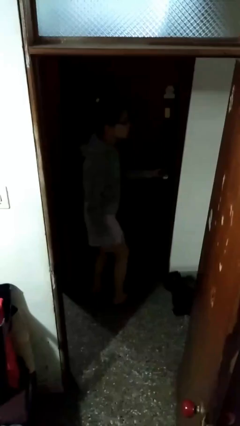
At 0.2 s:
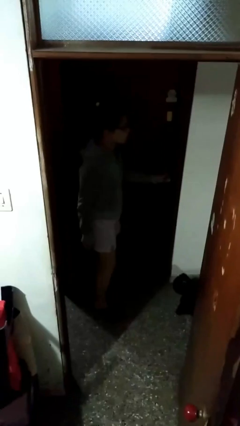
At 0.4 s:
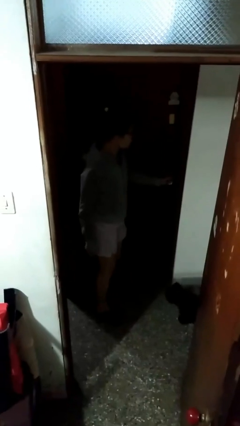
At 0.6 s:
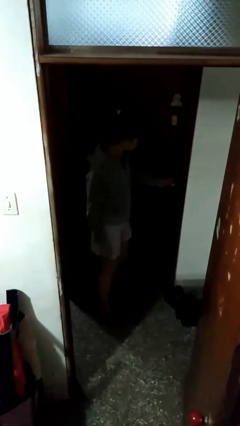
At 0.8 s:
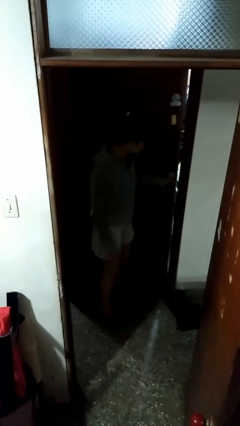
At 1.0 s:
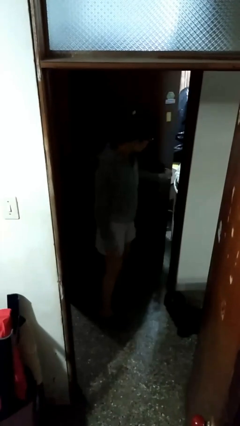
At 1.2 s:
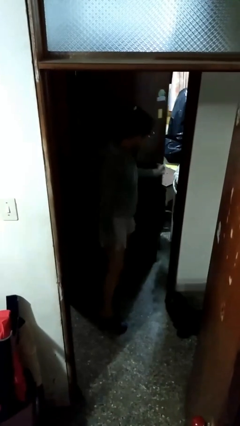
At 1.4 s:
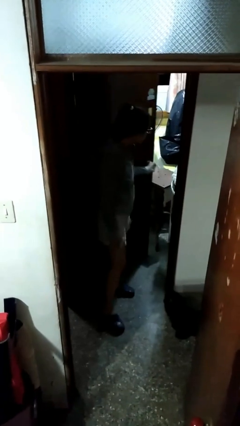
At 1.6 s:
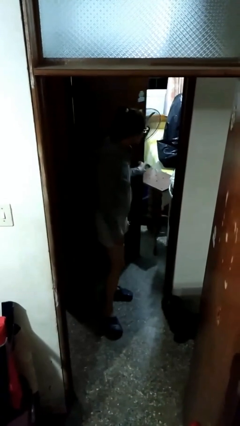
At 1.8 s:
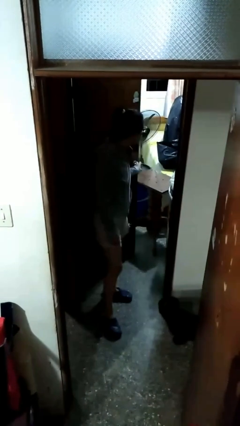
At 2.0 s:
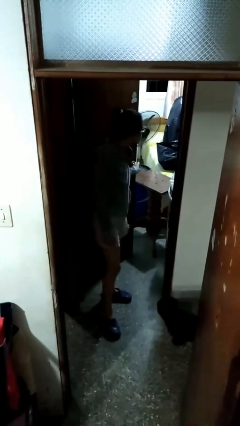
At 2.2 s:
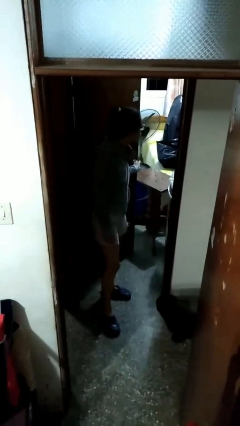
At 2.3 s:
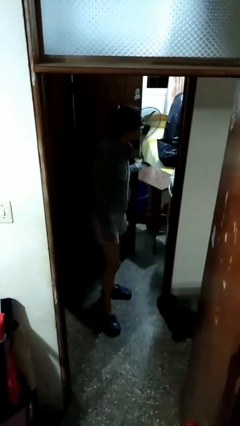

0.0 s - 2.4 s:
person opens facility door

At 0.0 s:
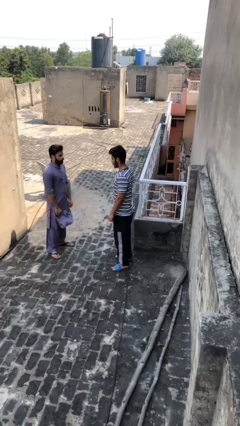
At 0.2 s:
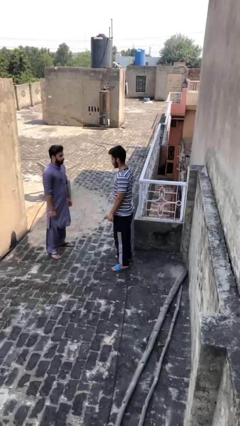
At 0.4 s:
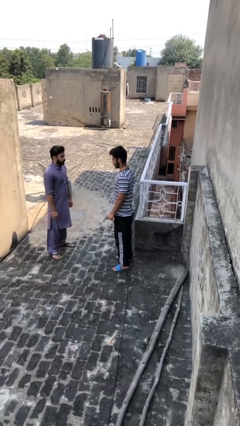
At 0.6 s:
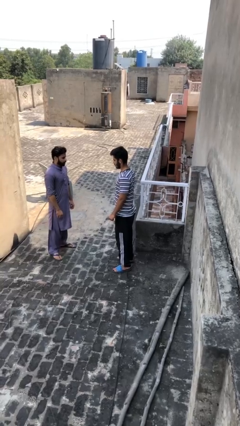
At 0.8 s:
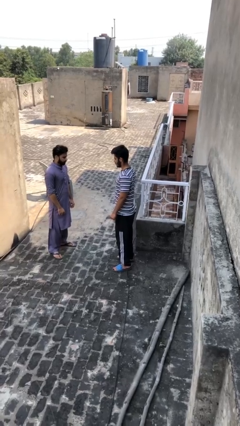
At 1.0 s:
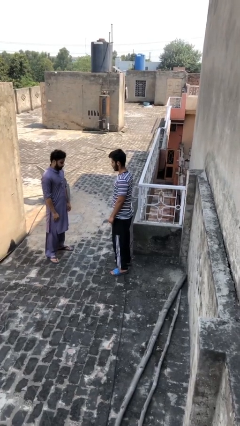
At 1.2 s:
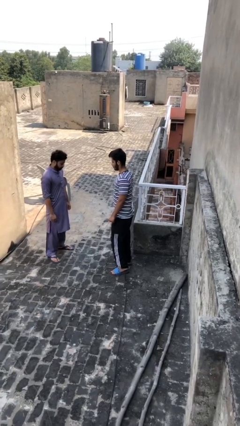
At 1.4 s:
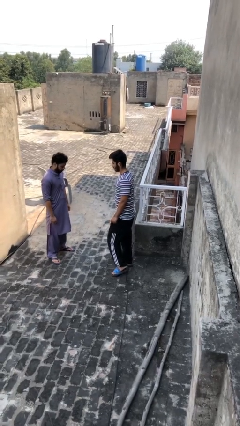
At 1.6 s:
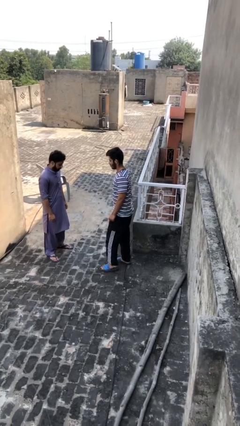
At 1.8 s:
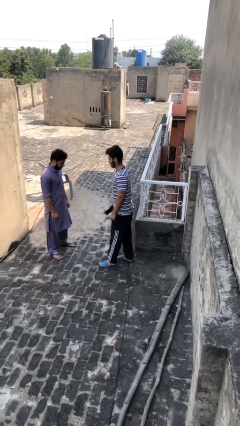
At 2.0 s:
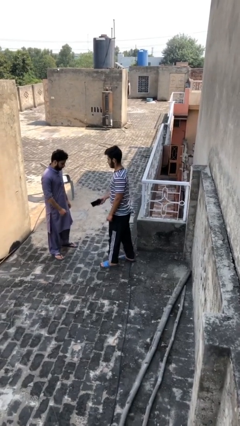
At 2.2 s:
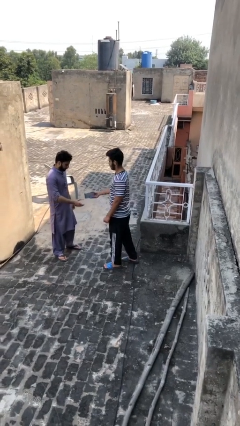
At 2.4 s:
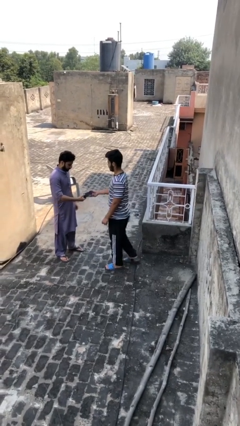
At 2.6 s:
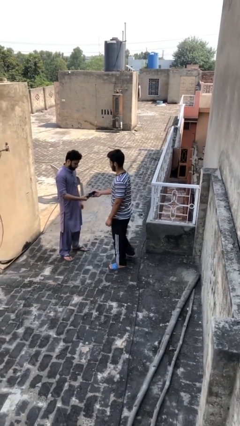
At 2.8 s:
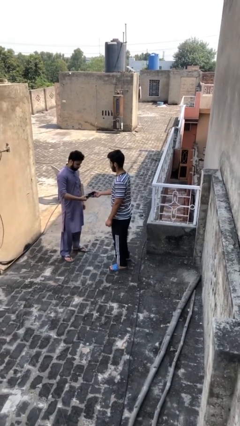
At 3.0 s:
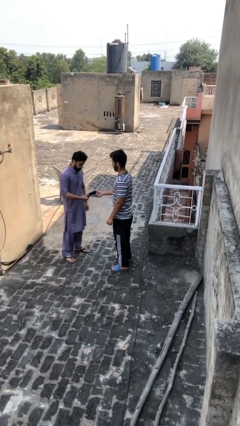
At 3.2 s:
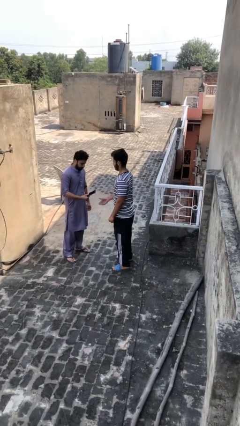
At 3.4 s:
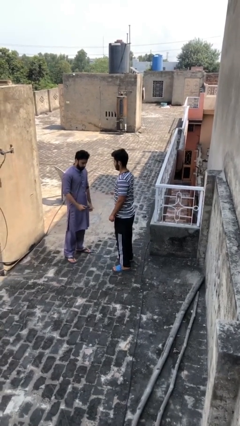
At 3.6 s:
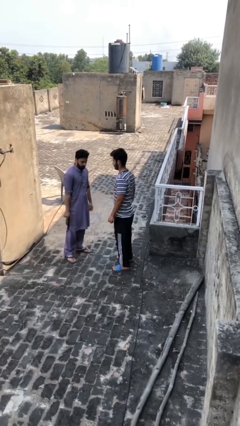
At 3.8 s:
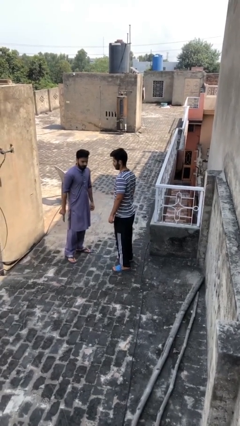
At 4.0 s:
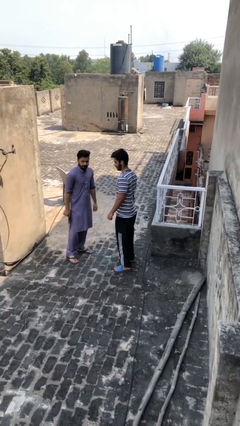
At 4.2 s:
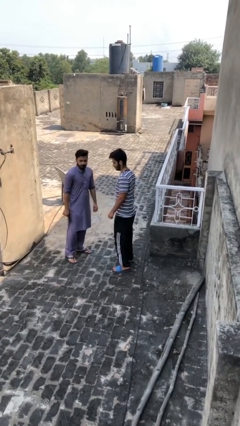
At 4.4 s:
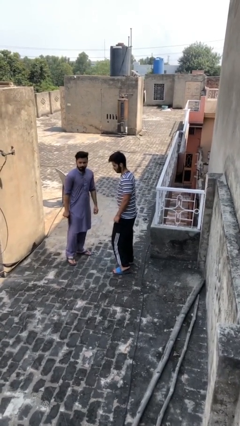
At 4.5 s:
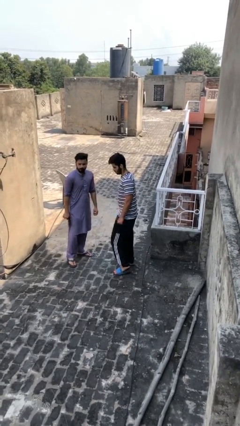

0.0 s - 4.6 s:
person transfers object to person

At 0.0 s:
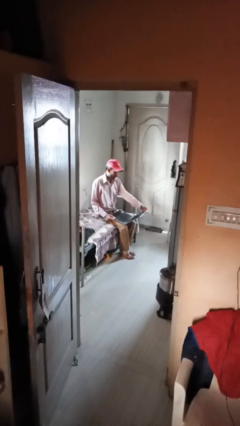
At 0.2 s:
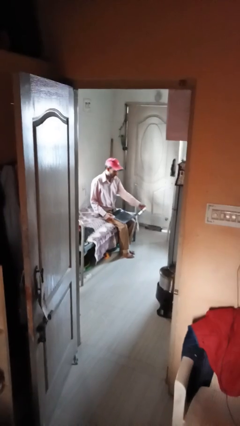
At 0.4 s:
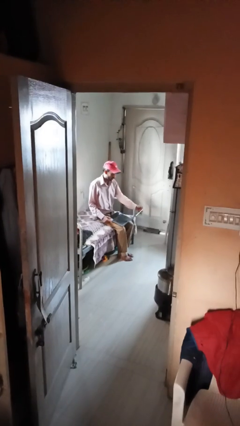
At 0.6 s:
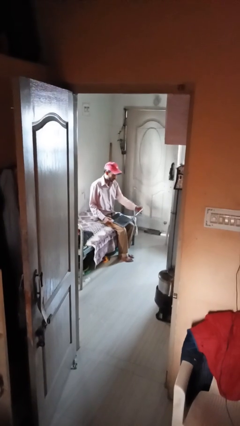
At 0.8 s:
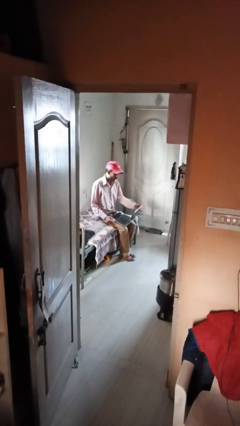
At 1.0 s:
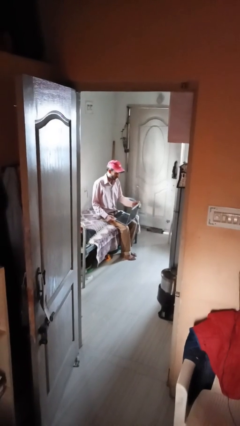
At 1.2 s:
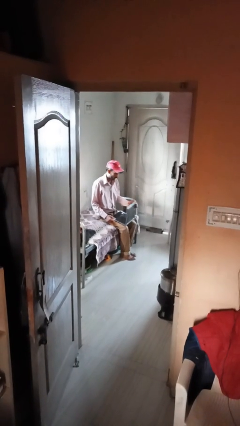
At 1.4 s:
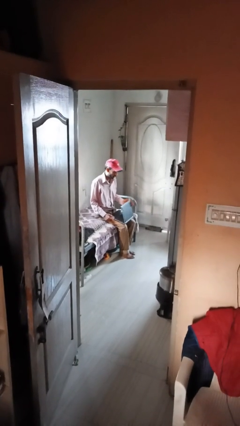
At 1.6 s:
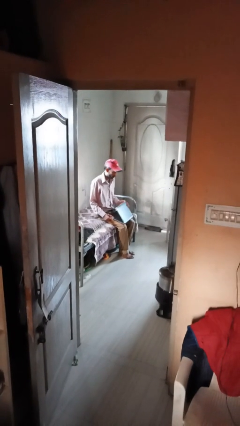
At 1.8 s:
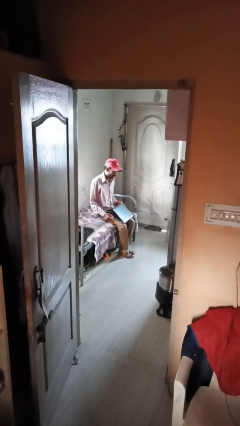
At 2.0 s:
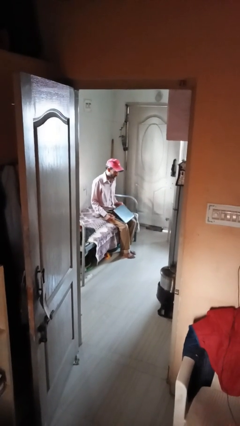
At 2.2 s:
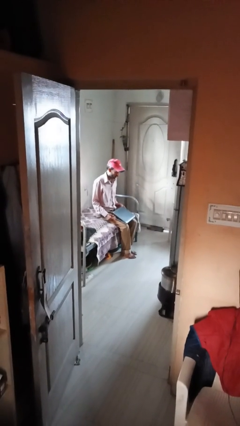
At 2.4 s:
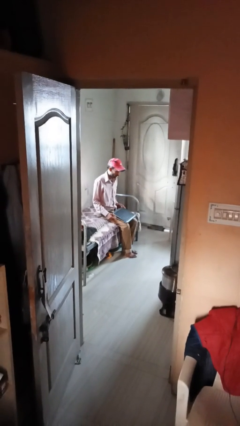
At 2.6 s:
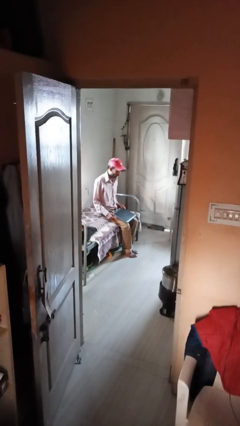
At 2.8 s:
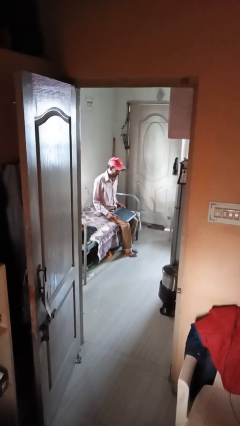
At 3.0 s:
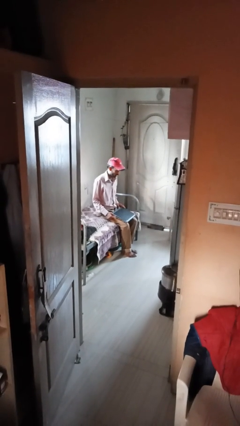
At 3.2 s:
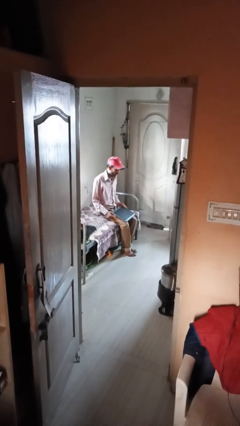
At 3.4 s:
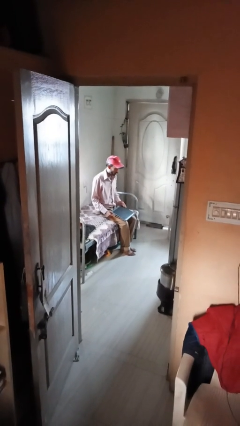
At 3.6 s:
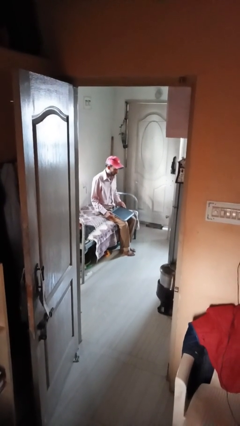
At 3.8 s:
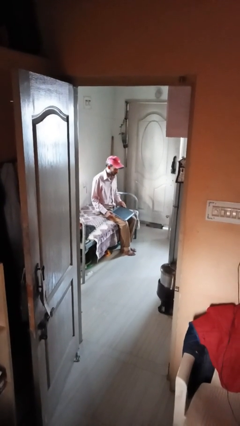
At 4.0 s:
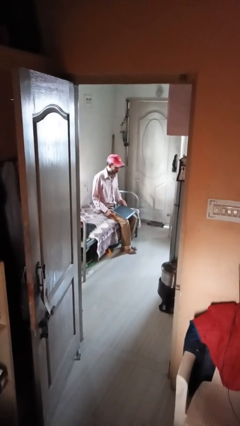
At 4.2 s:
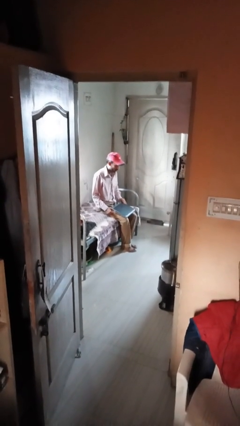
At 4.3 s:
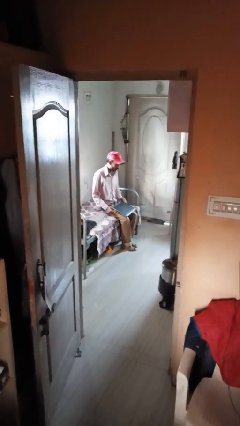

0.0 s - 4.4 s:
person closes laptop

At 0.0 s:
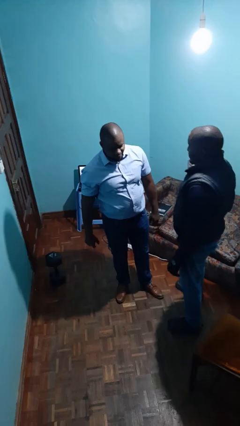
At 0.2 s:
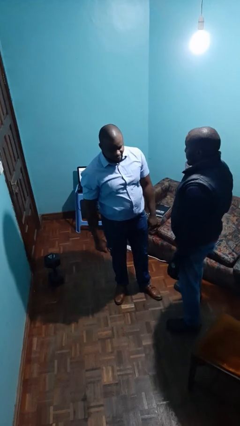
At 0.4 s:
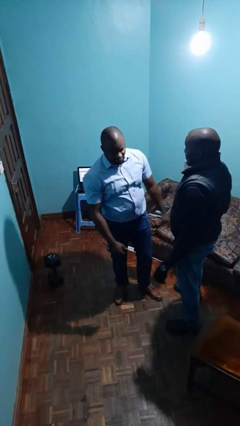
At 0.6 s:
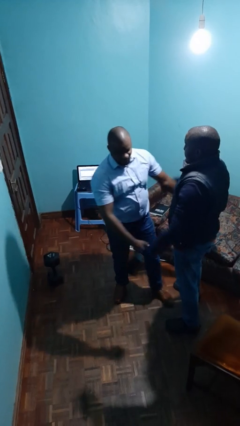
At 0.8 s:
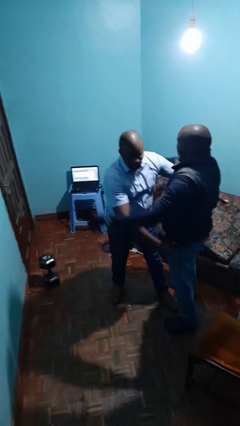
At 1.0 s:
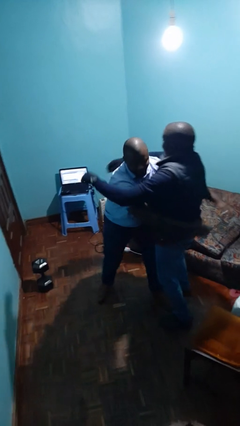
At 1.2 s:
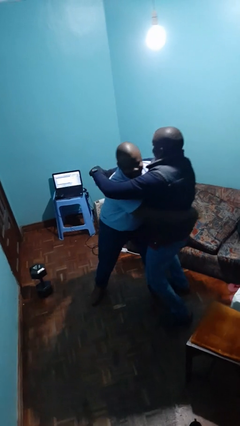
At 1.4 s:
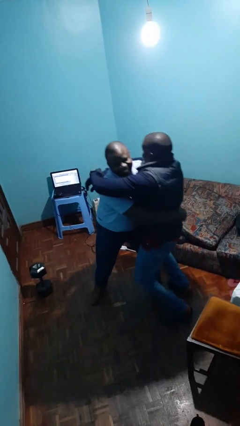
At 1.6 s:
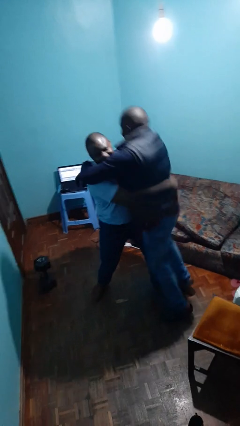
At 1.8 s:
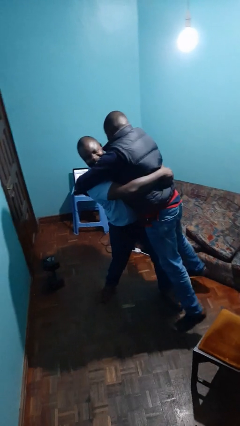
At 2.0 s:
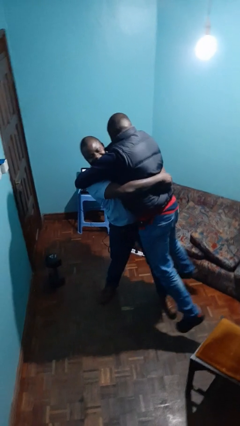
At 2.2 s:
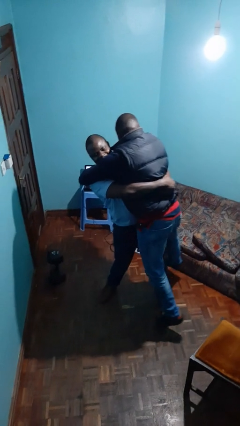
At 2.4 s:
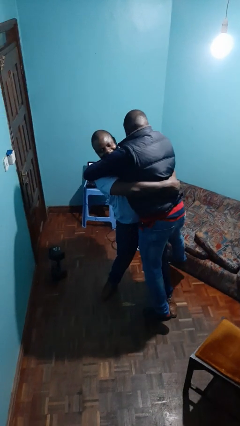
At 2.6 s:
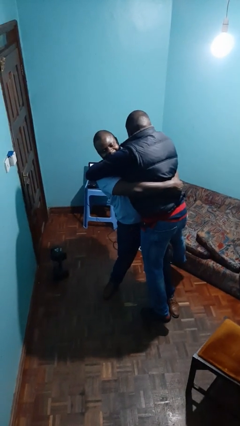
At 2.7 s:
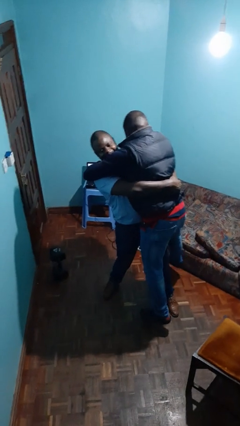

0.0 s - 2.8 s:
person picks up person

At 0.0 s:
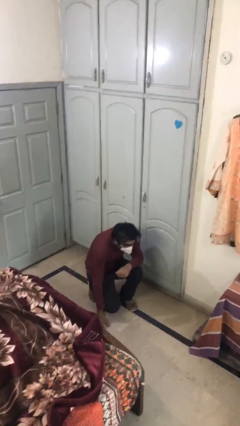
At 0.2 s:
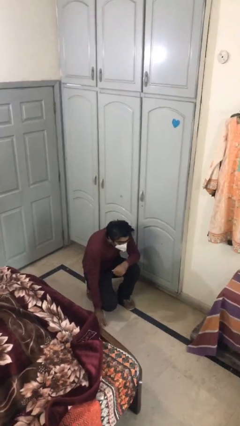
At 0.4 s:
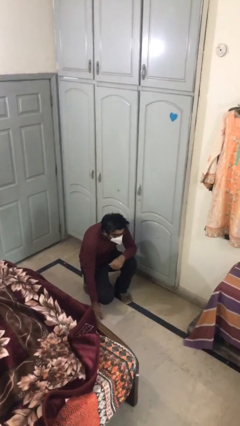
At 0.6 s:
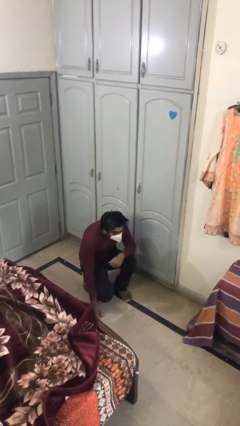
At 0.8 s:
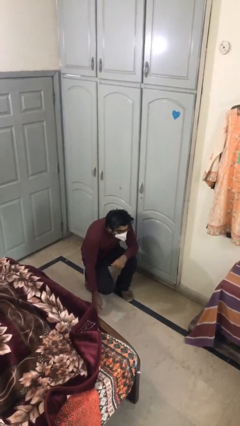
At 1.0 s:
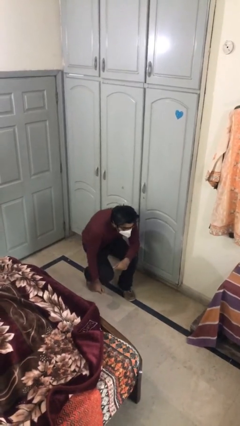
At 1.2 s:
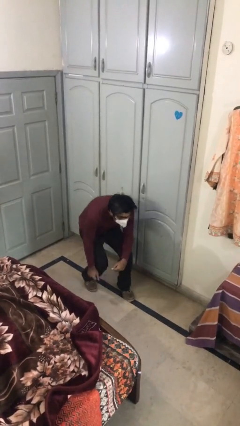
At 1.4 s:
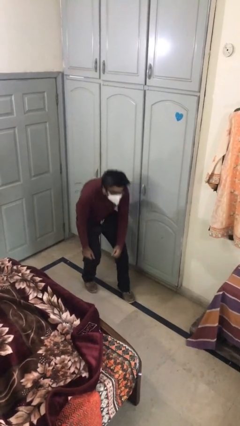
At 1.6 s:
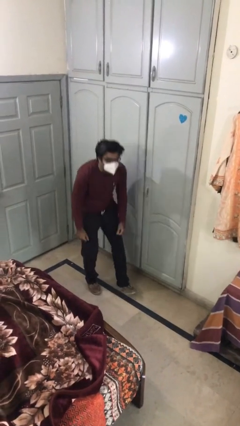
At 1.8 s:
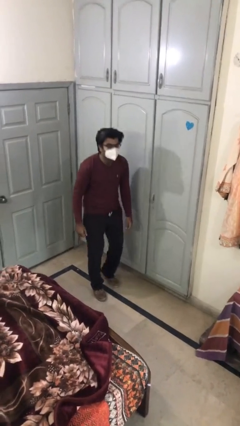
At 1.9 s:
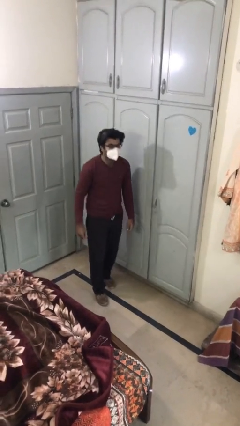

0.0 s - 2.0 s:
person stands up

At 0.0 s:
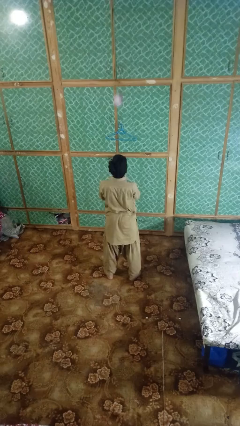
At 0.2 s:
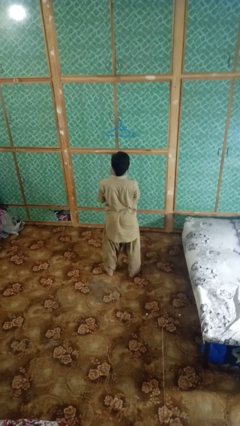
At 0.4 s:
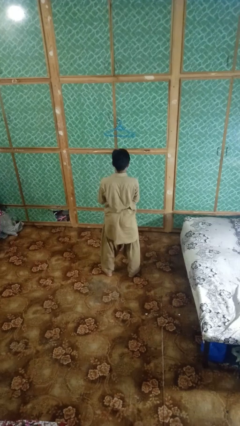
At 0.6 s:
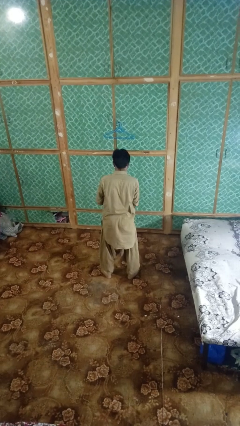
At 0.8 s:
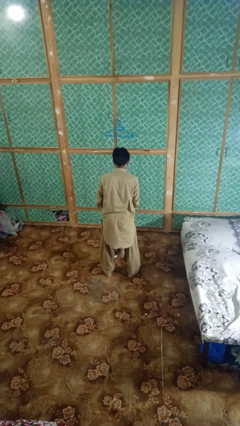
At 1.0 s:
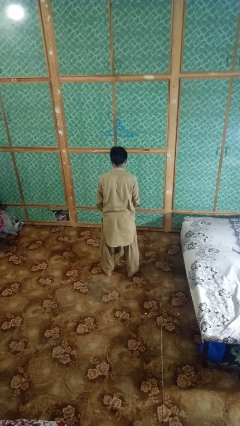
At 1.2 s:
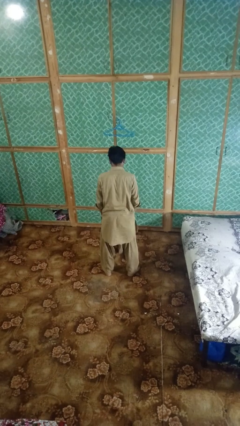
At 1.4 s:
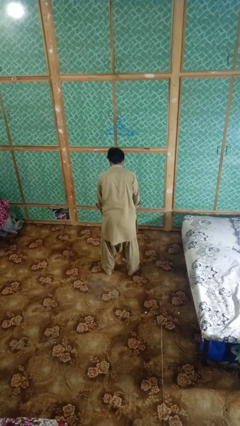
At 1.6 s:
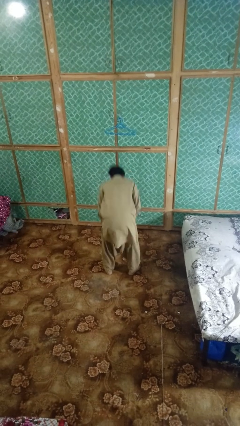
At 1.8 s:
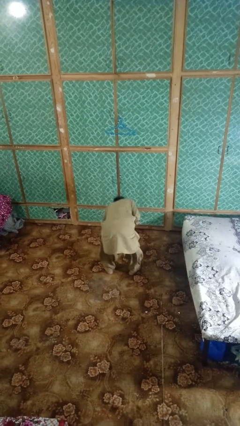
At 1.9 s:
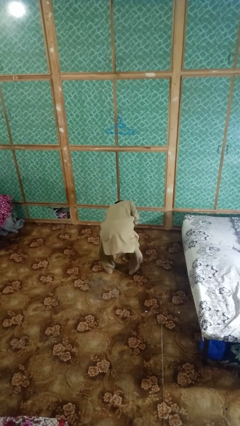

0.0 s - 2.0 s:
person catches dropped object
